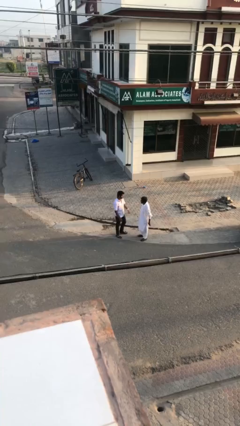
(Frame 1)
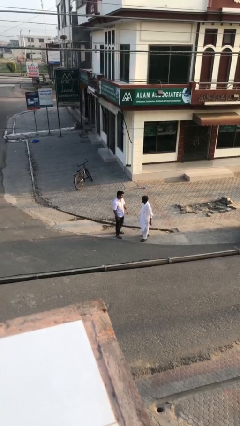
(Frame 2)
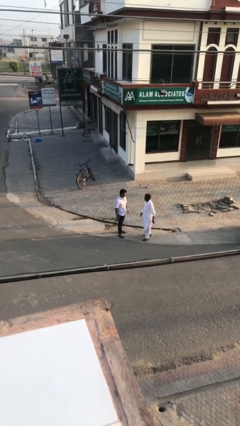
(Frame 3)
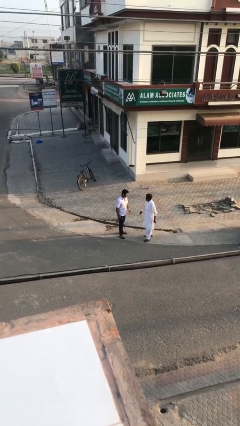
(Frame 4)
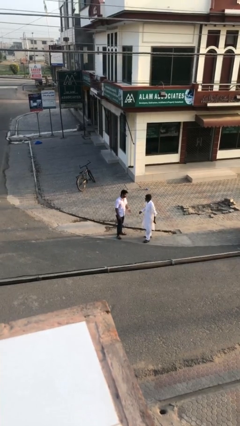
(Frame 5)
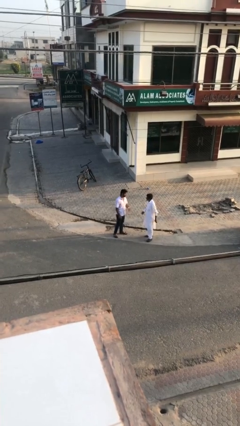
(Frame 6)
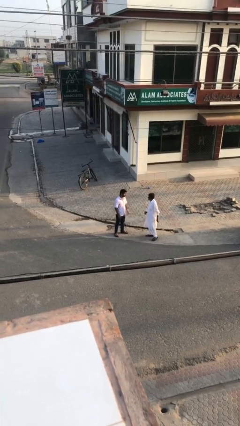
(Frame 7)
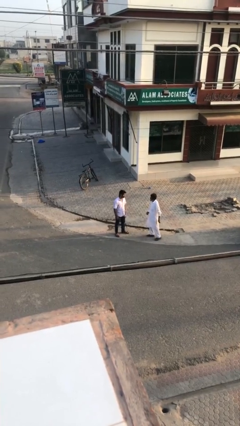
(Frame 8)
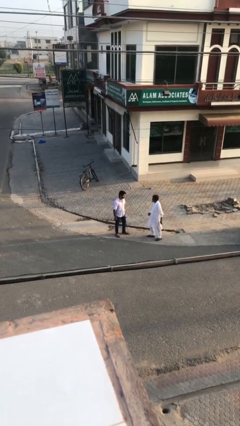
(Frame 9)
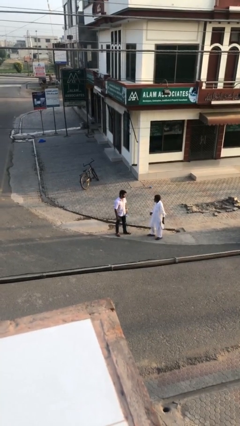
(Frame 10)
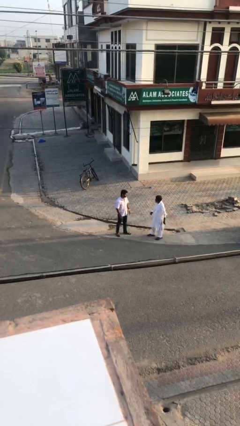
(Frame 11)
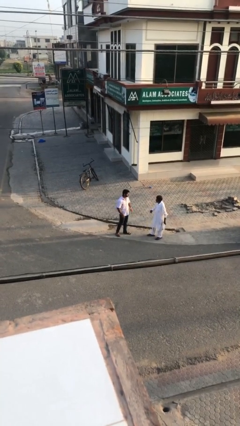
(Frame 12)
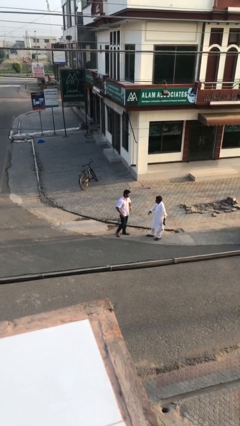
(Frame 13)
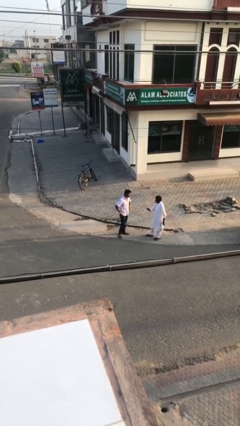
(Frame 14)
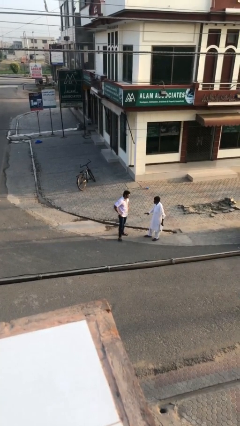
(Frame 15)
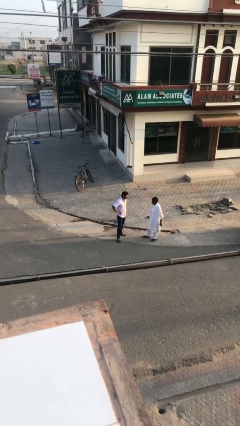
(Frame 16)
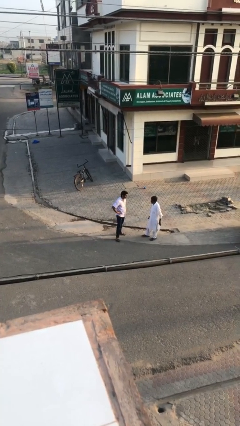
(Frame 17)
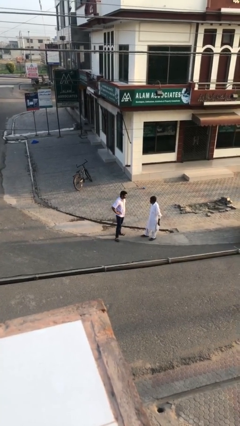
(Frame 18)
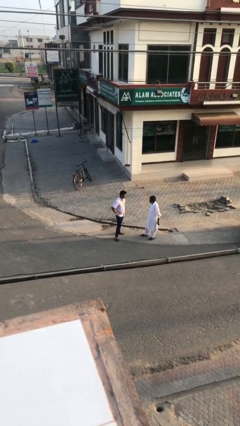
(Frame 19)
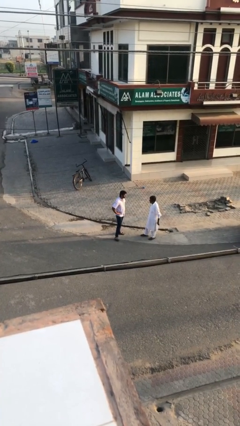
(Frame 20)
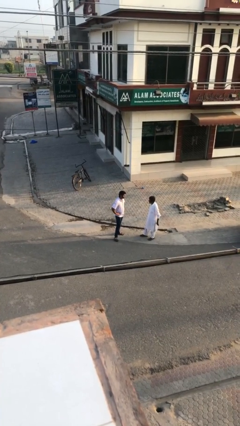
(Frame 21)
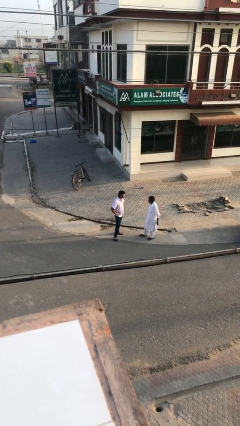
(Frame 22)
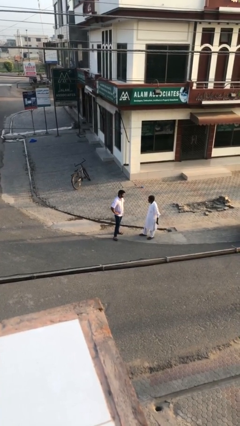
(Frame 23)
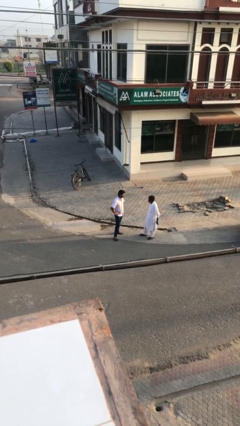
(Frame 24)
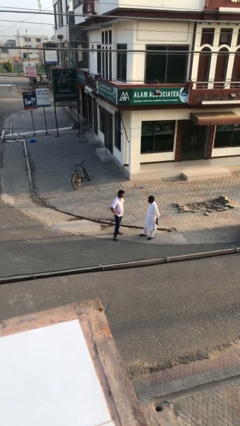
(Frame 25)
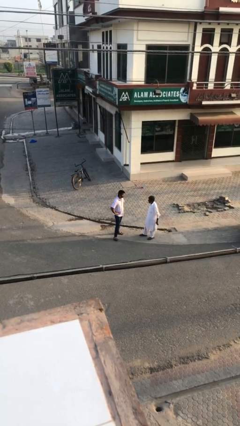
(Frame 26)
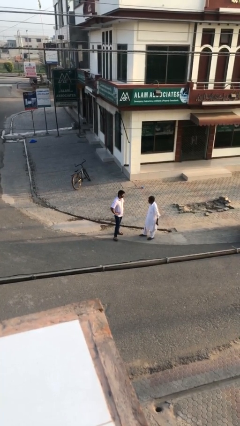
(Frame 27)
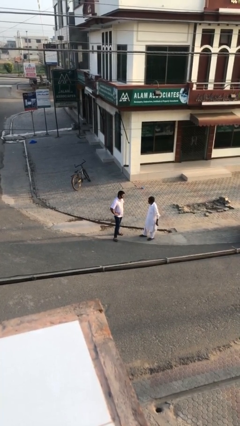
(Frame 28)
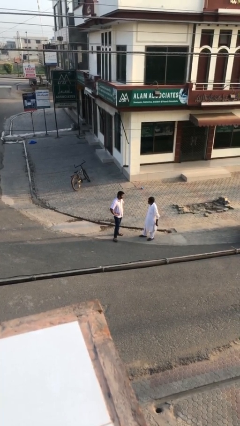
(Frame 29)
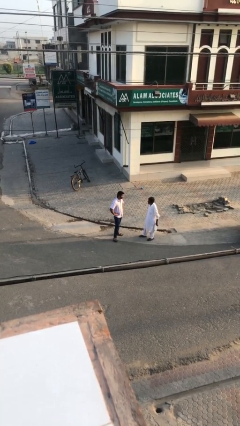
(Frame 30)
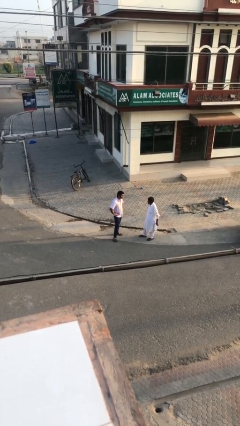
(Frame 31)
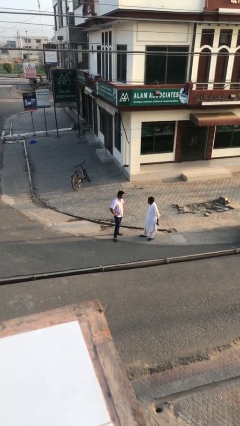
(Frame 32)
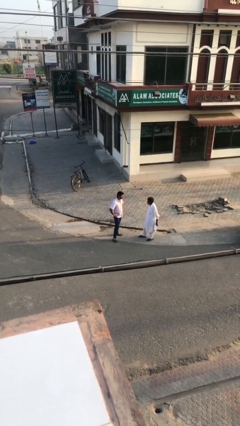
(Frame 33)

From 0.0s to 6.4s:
person talks to person

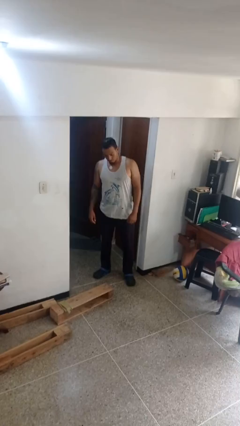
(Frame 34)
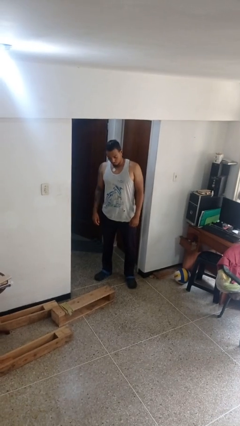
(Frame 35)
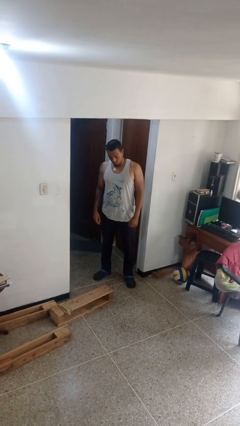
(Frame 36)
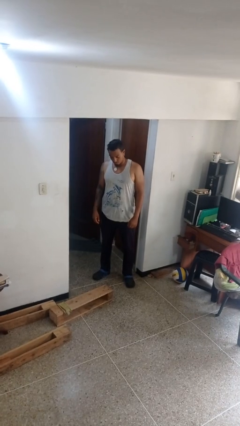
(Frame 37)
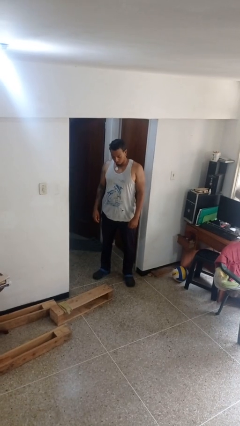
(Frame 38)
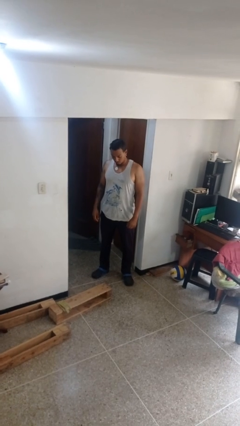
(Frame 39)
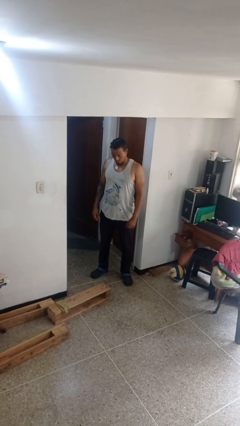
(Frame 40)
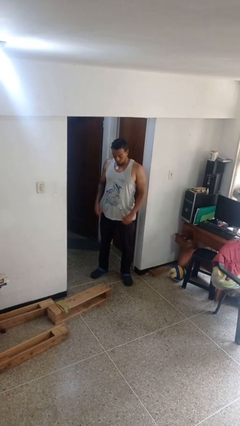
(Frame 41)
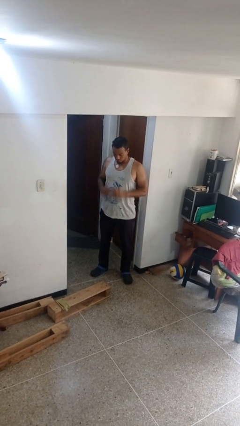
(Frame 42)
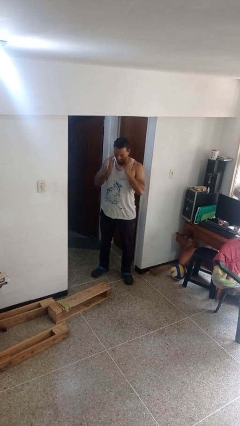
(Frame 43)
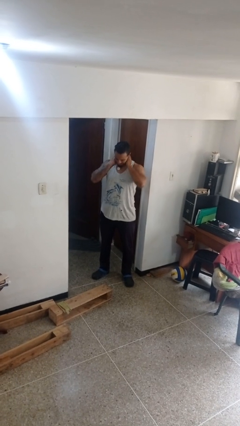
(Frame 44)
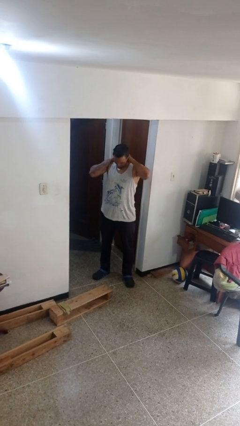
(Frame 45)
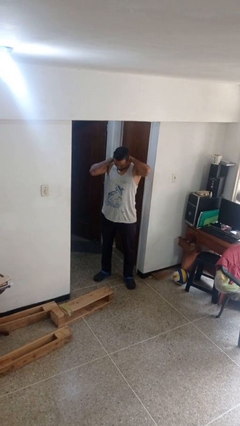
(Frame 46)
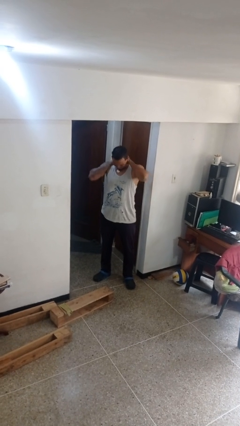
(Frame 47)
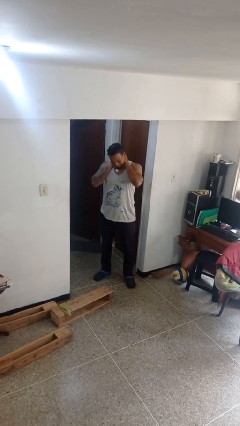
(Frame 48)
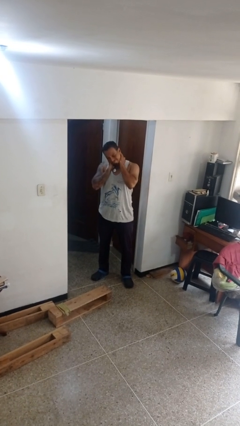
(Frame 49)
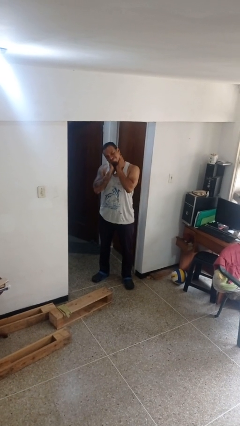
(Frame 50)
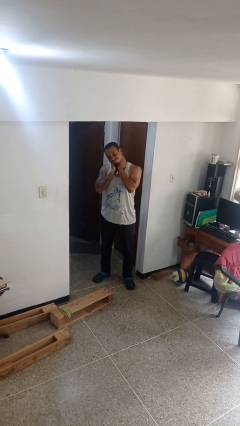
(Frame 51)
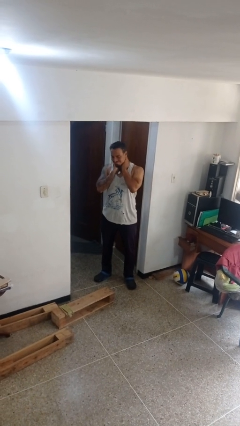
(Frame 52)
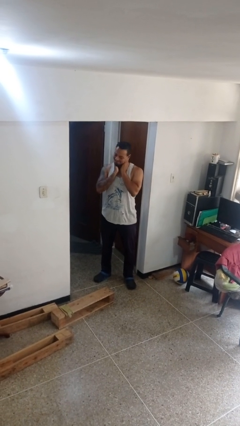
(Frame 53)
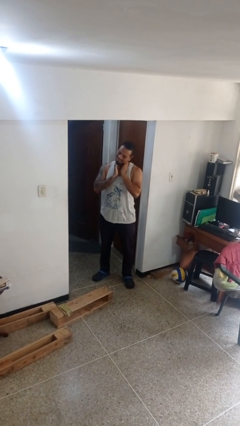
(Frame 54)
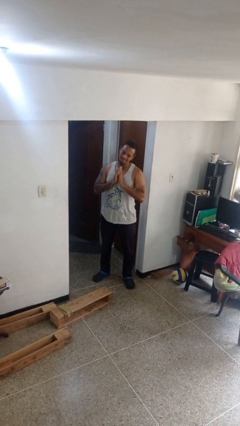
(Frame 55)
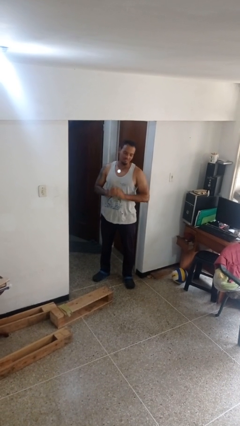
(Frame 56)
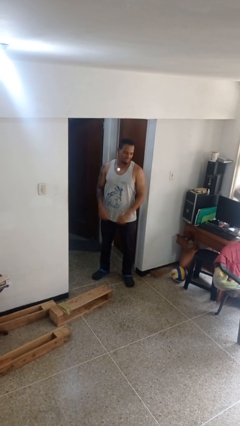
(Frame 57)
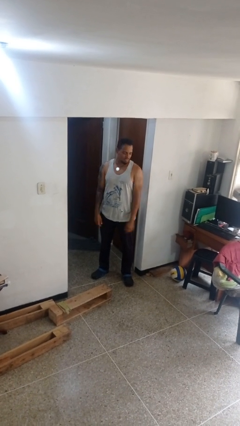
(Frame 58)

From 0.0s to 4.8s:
person rubs neck

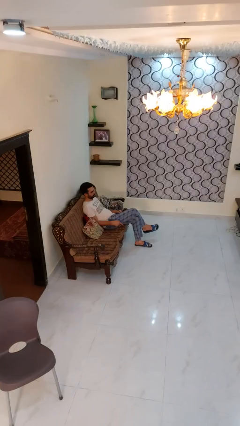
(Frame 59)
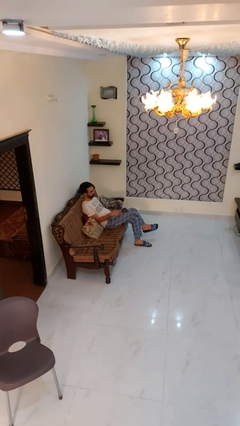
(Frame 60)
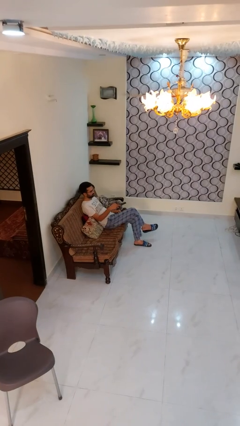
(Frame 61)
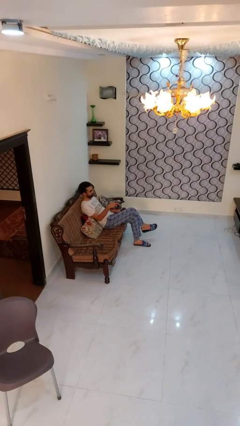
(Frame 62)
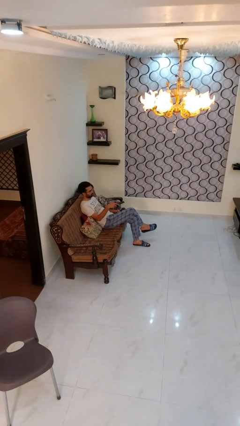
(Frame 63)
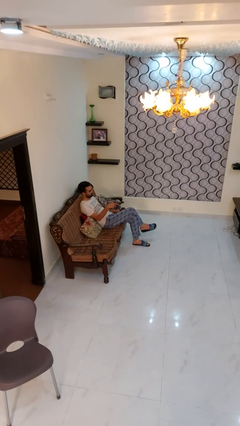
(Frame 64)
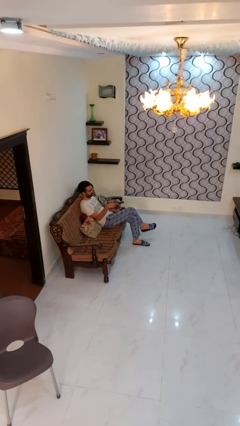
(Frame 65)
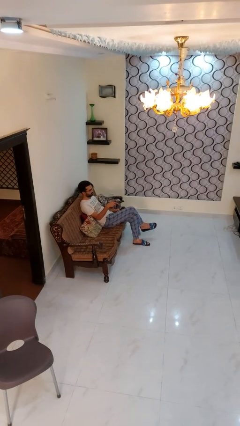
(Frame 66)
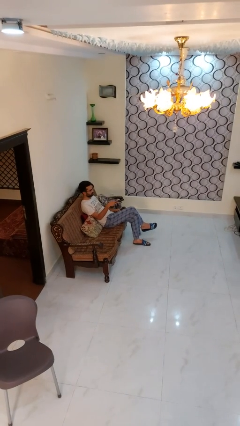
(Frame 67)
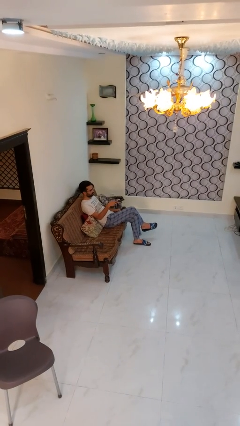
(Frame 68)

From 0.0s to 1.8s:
person uses television remote

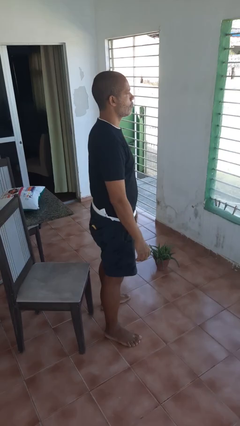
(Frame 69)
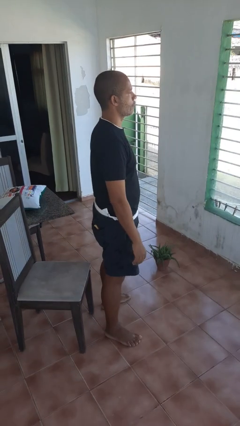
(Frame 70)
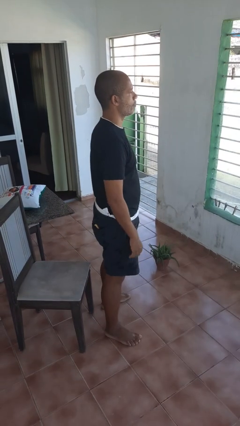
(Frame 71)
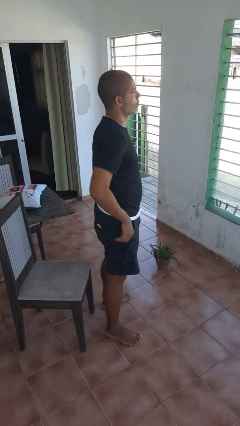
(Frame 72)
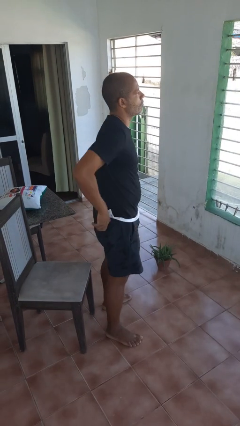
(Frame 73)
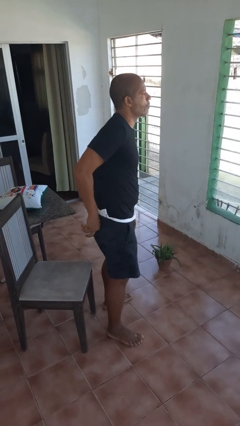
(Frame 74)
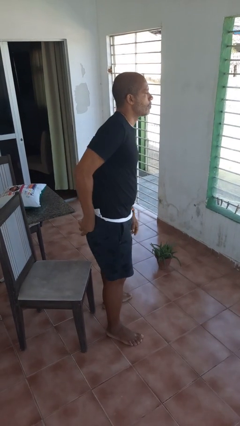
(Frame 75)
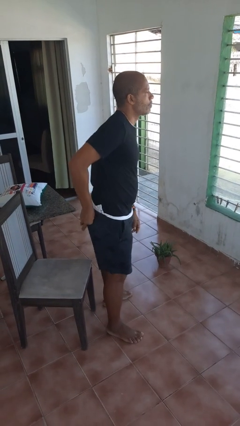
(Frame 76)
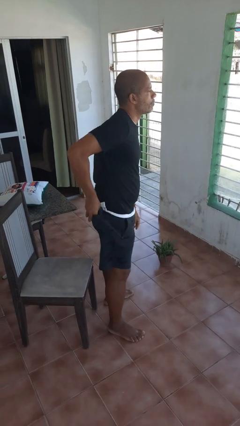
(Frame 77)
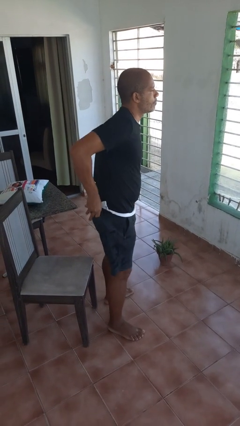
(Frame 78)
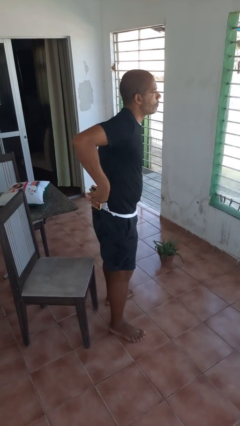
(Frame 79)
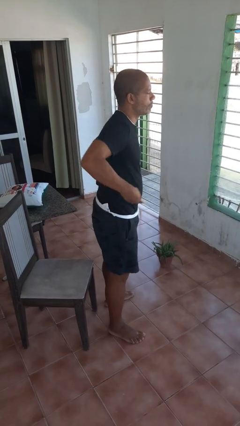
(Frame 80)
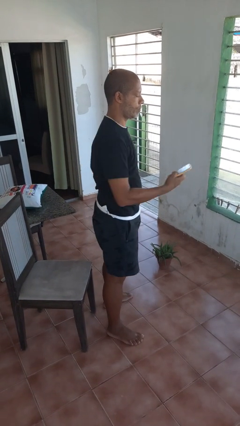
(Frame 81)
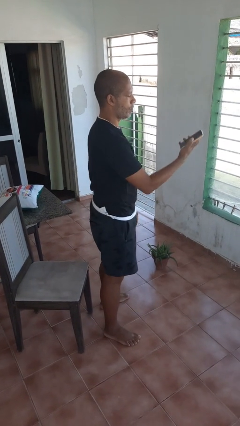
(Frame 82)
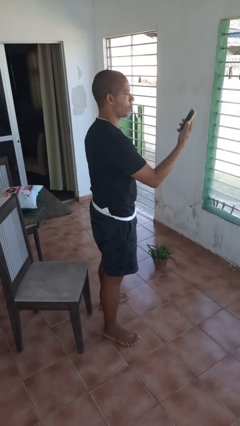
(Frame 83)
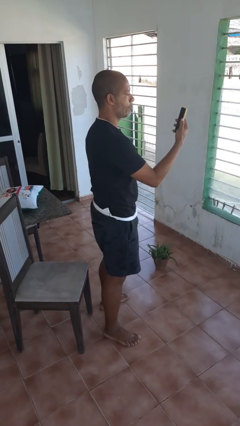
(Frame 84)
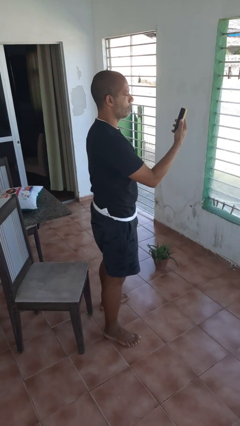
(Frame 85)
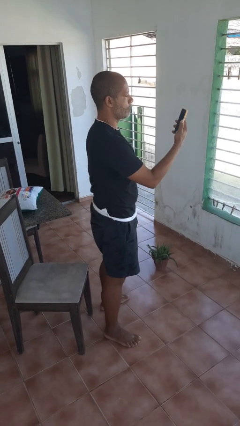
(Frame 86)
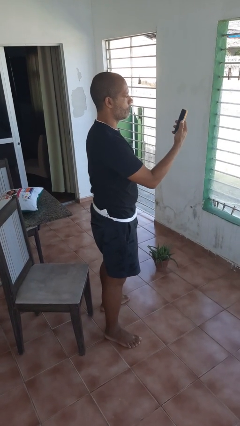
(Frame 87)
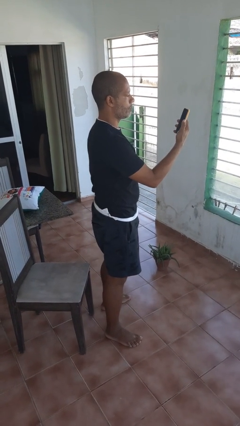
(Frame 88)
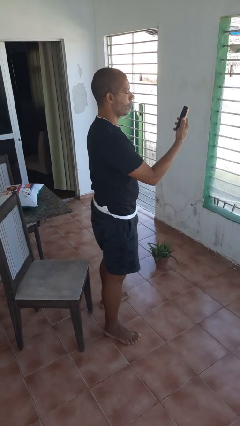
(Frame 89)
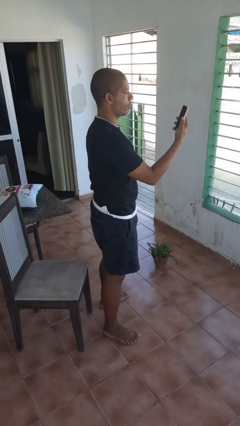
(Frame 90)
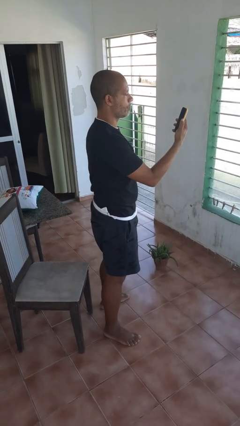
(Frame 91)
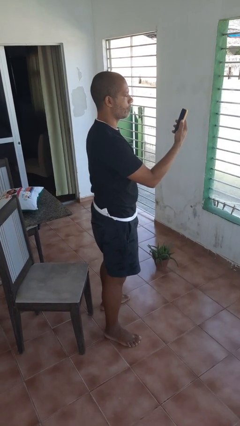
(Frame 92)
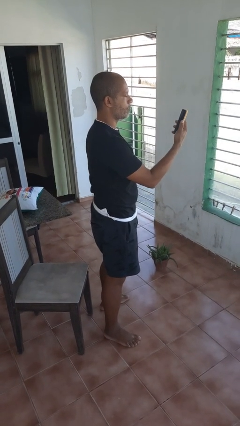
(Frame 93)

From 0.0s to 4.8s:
person takes phone from pocket
